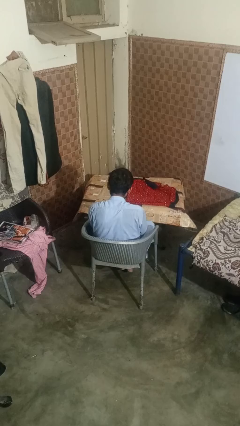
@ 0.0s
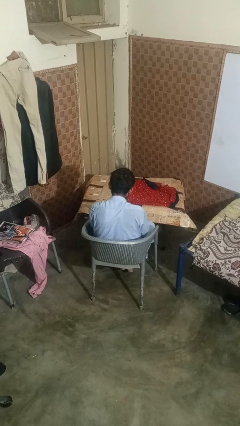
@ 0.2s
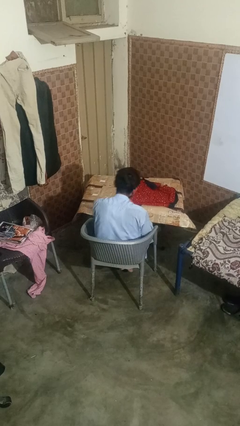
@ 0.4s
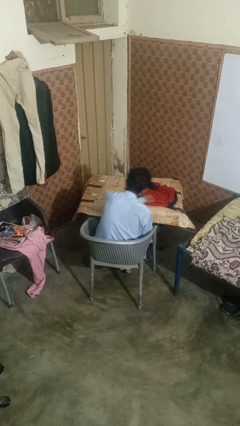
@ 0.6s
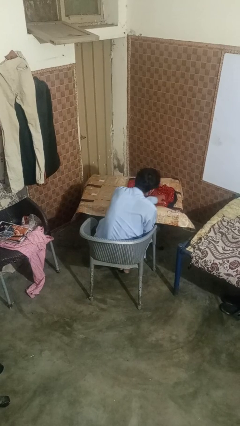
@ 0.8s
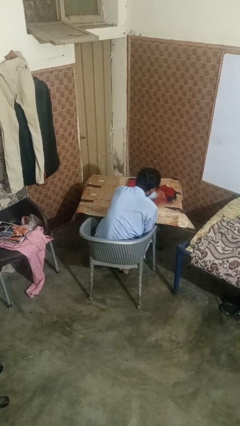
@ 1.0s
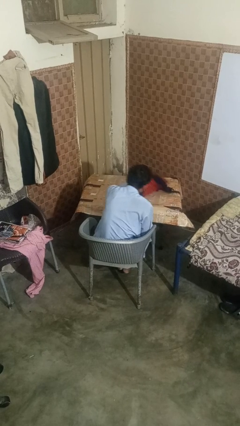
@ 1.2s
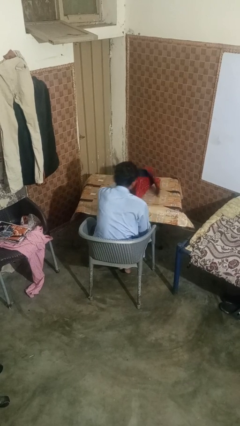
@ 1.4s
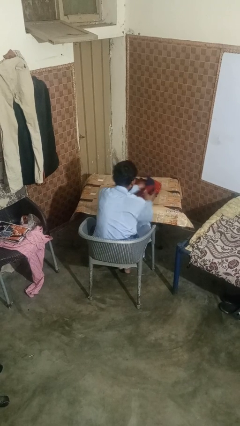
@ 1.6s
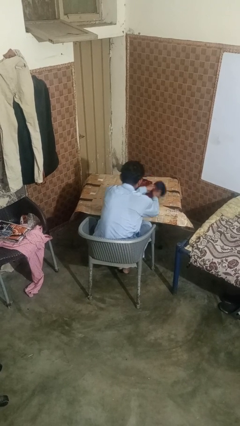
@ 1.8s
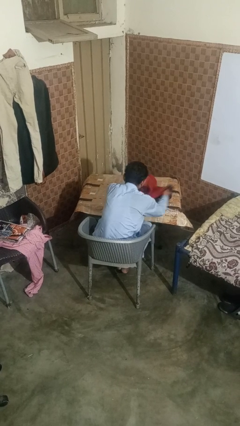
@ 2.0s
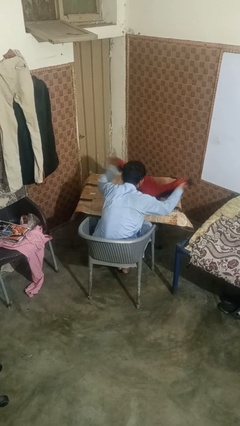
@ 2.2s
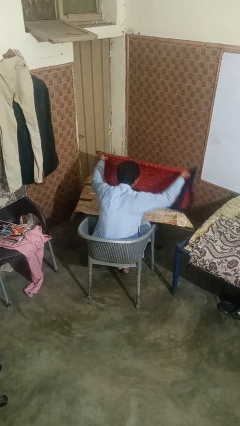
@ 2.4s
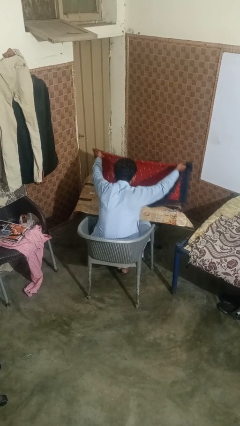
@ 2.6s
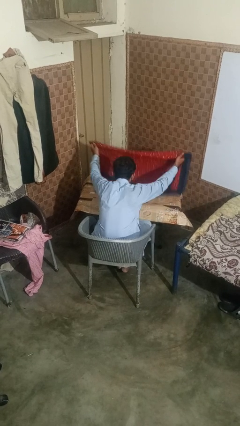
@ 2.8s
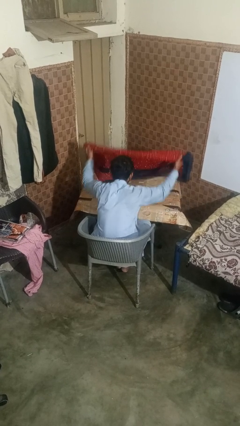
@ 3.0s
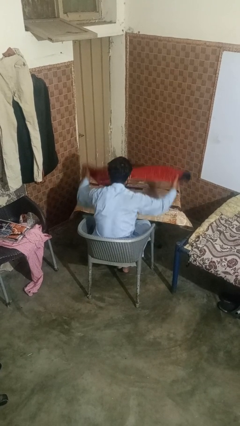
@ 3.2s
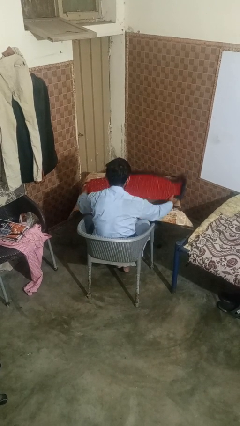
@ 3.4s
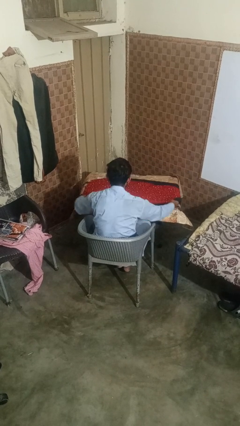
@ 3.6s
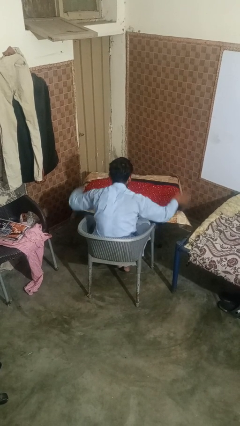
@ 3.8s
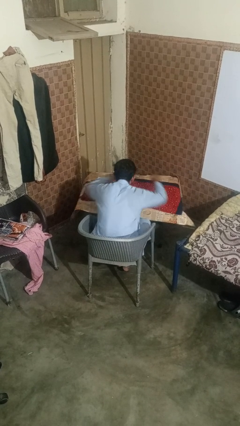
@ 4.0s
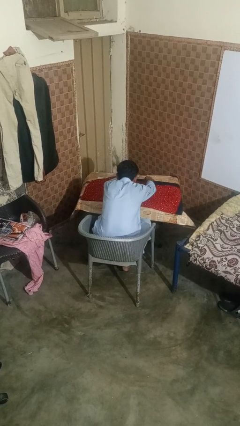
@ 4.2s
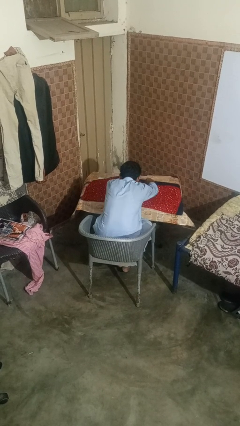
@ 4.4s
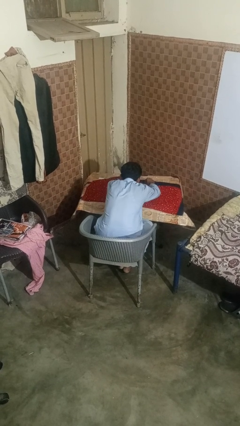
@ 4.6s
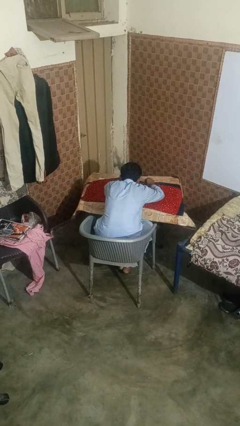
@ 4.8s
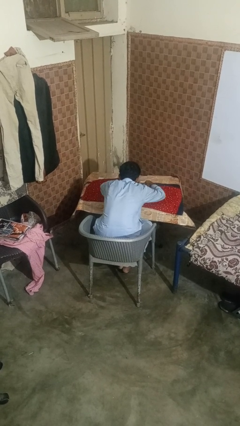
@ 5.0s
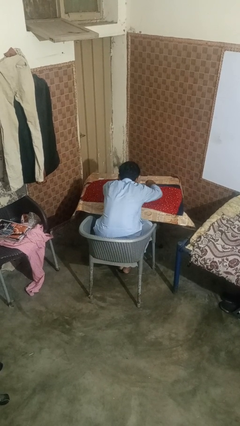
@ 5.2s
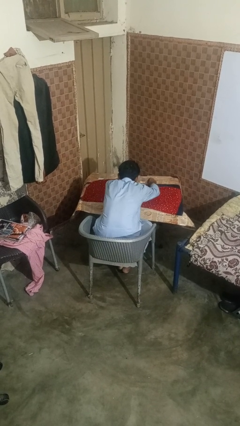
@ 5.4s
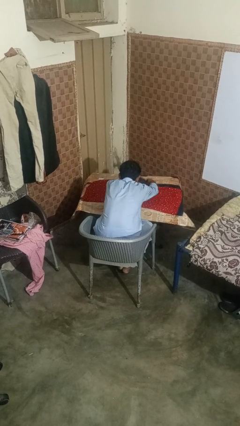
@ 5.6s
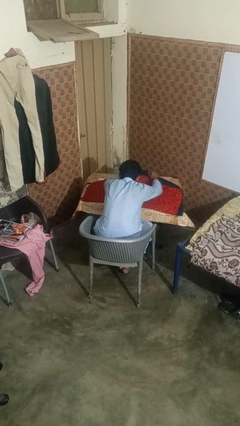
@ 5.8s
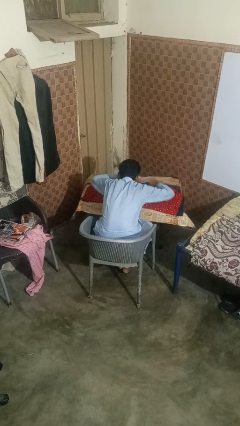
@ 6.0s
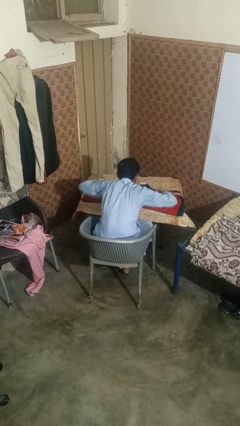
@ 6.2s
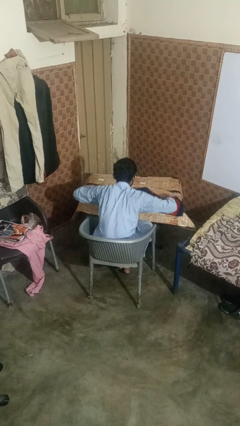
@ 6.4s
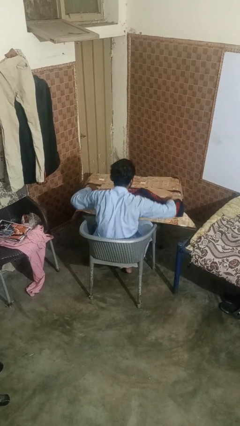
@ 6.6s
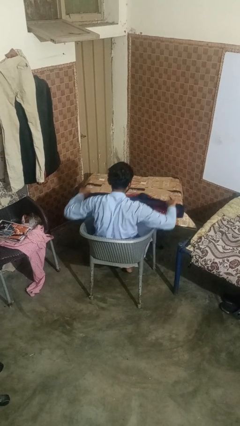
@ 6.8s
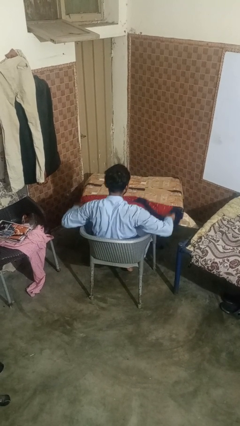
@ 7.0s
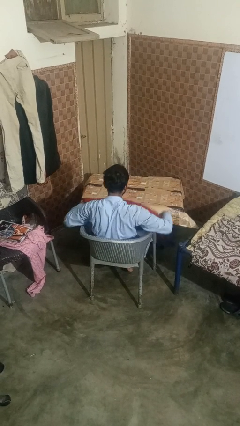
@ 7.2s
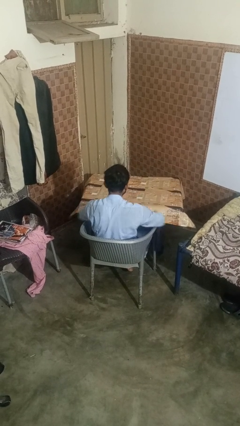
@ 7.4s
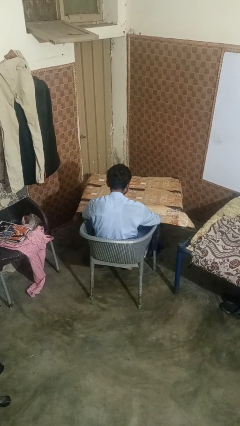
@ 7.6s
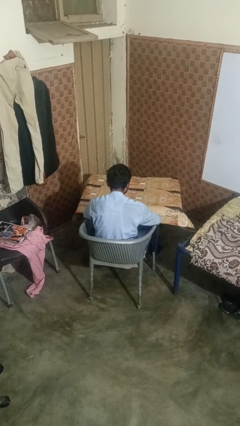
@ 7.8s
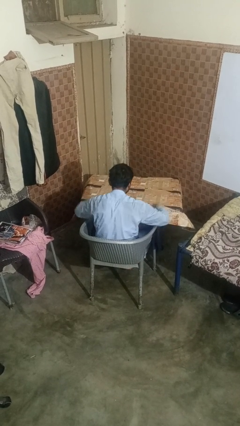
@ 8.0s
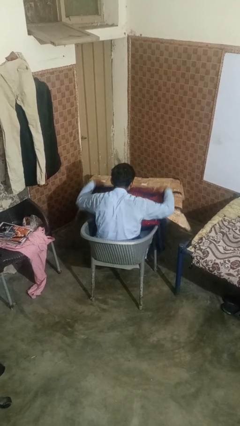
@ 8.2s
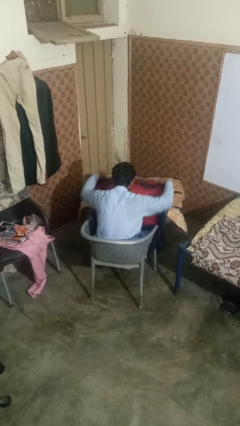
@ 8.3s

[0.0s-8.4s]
person spreads tablecloth

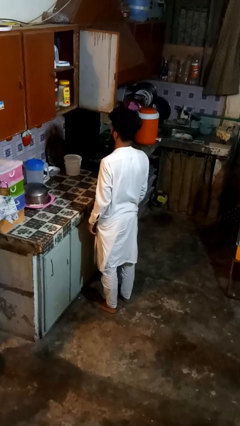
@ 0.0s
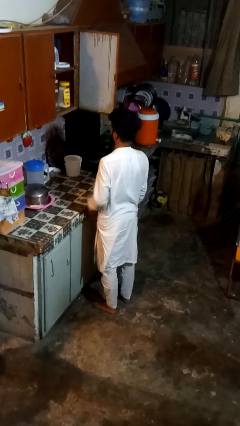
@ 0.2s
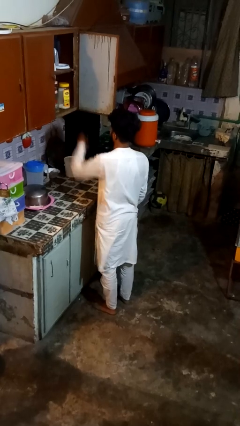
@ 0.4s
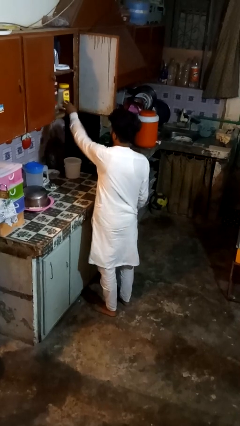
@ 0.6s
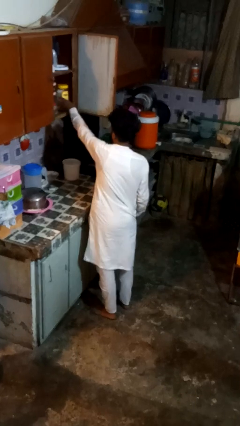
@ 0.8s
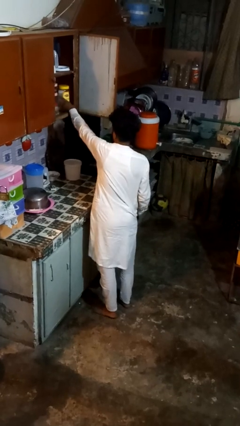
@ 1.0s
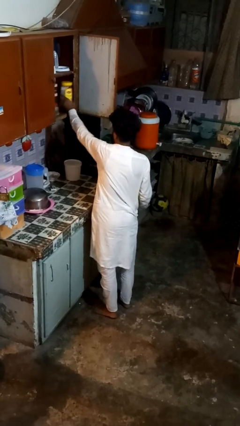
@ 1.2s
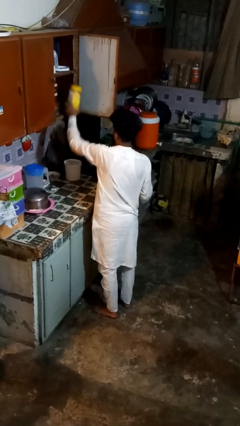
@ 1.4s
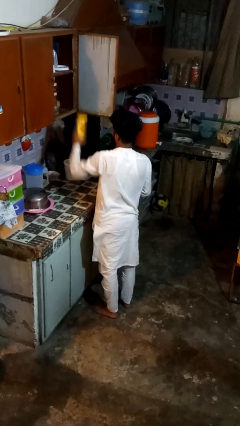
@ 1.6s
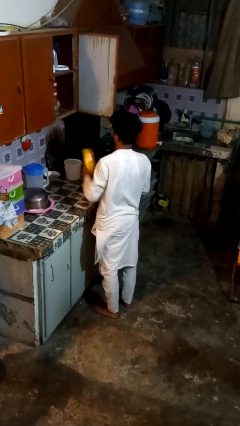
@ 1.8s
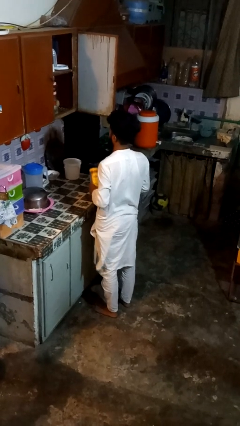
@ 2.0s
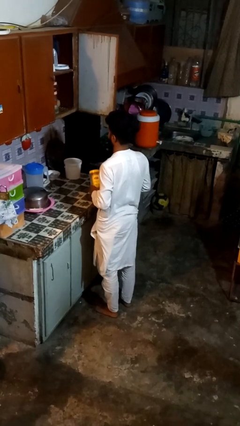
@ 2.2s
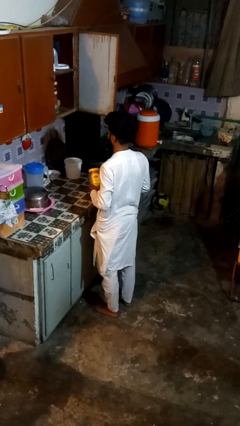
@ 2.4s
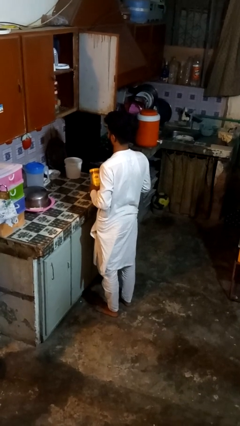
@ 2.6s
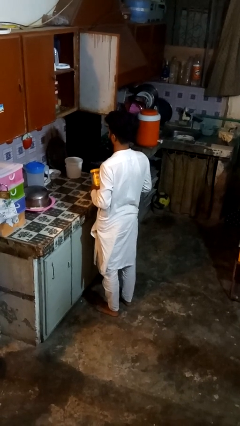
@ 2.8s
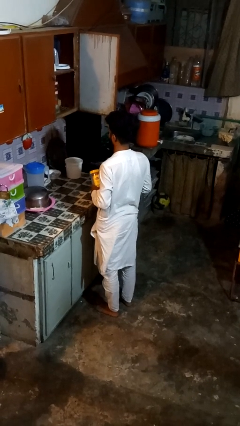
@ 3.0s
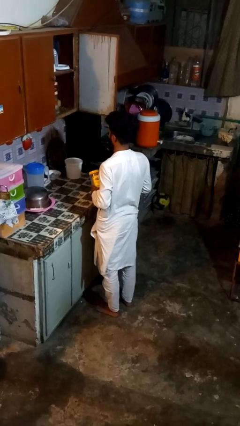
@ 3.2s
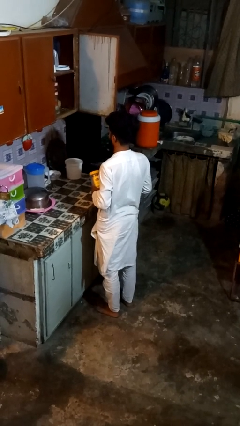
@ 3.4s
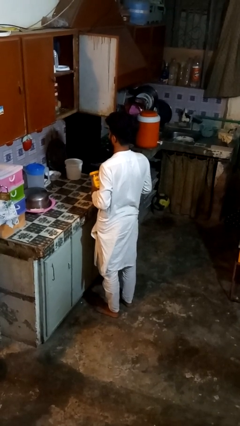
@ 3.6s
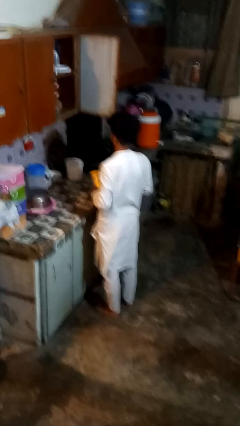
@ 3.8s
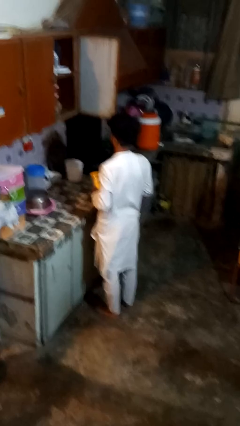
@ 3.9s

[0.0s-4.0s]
person puts object in cabinet

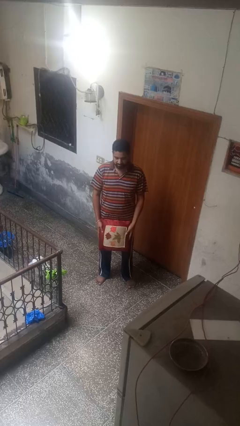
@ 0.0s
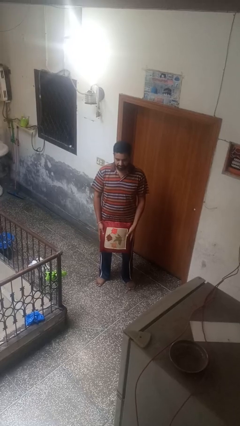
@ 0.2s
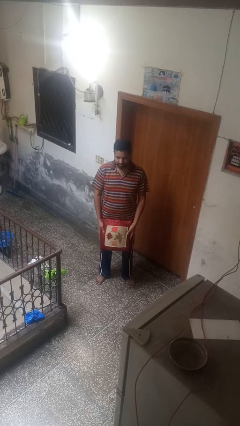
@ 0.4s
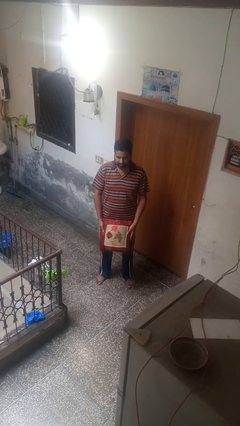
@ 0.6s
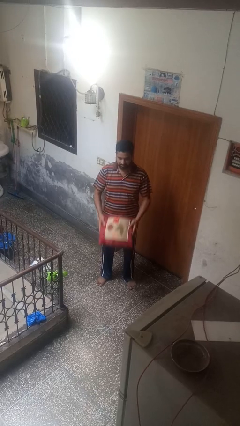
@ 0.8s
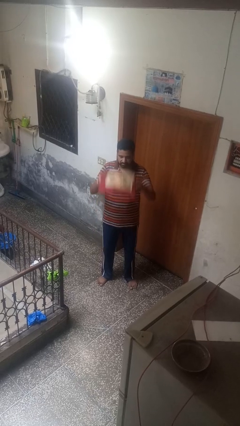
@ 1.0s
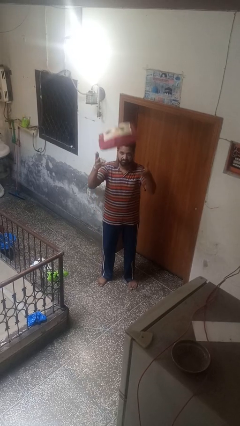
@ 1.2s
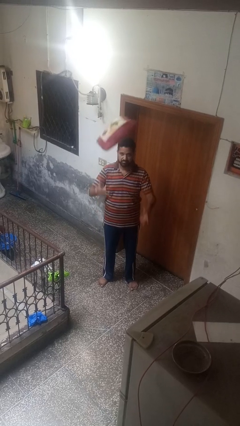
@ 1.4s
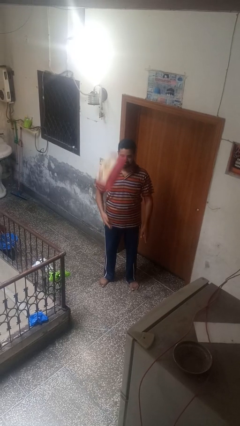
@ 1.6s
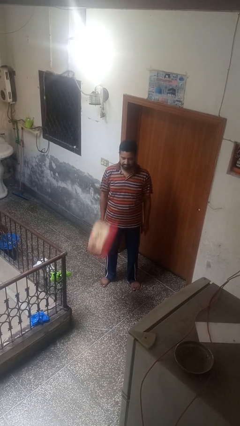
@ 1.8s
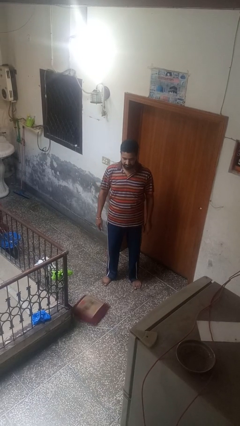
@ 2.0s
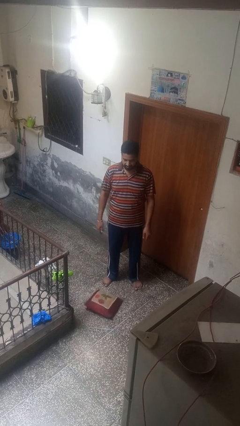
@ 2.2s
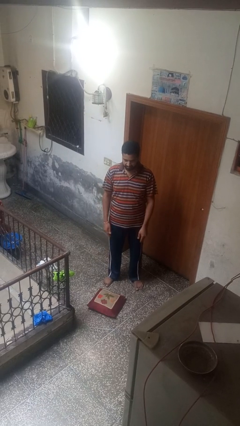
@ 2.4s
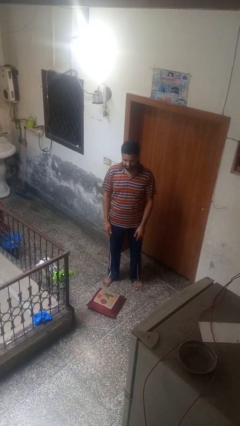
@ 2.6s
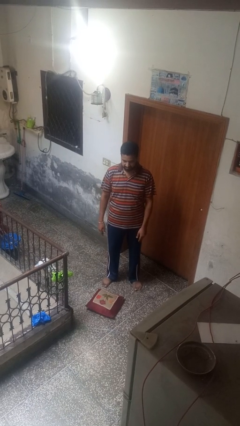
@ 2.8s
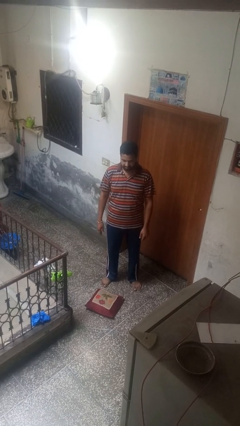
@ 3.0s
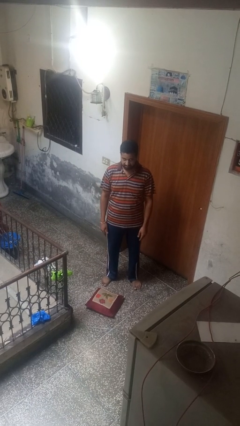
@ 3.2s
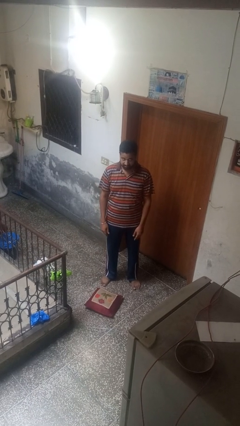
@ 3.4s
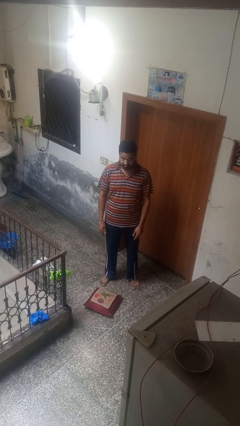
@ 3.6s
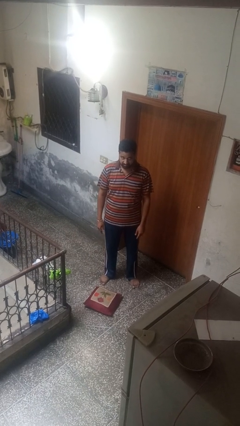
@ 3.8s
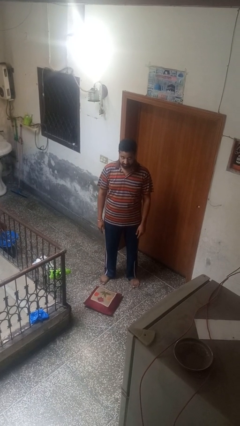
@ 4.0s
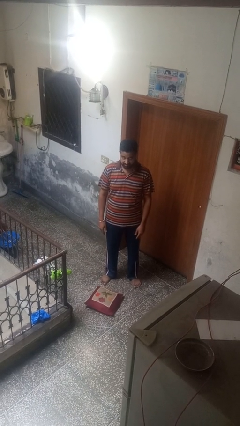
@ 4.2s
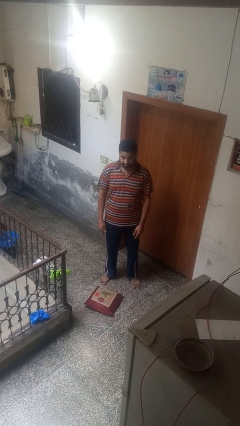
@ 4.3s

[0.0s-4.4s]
person throws object into air

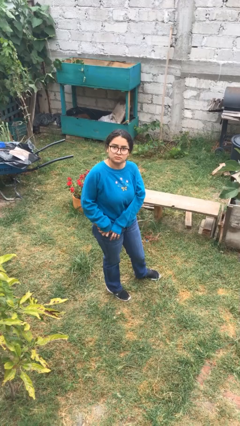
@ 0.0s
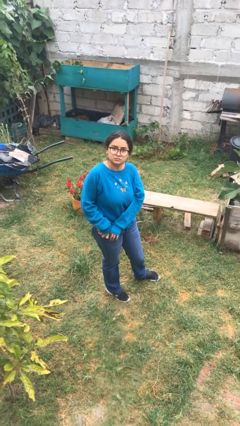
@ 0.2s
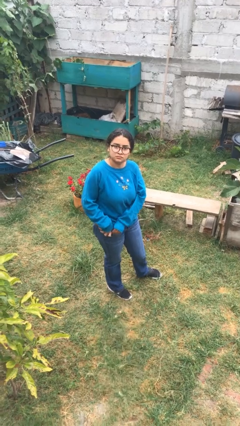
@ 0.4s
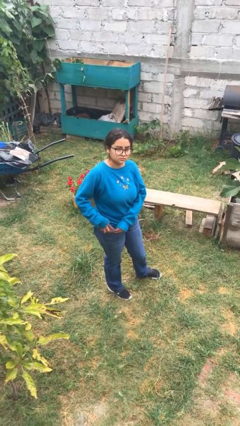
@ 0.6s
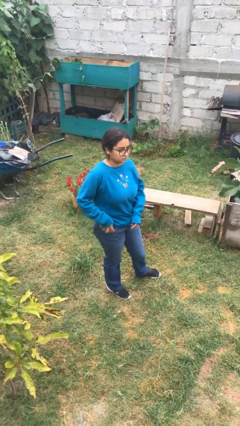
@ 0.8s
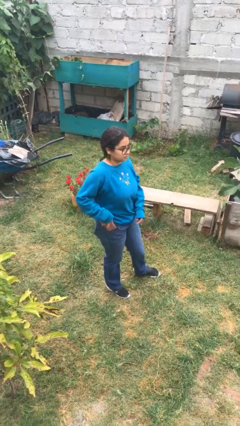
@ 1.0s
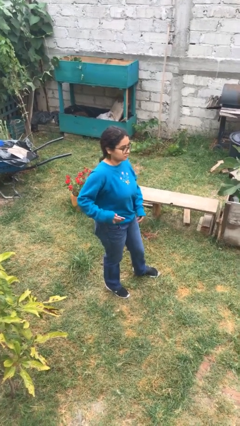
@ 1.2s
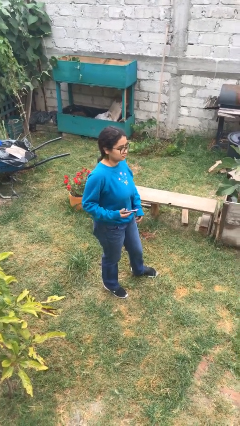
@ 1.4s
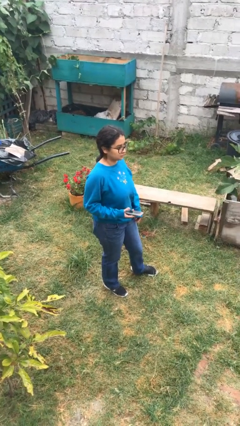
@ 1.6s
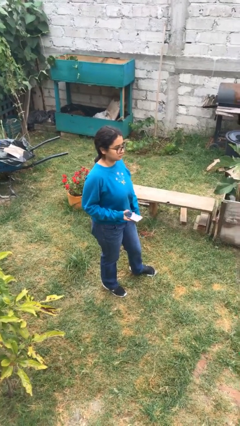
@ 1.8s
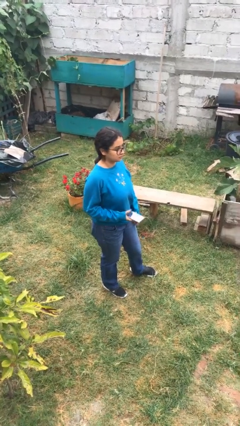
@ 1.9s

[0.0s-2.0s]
person takes phone from pocket
